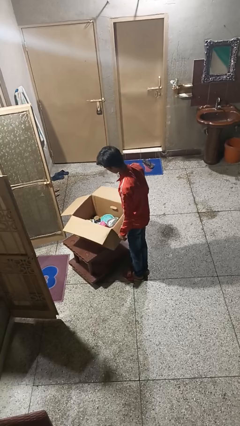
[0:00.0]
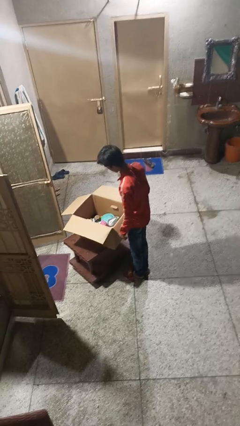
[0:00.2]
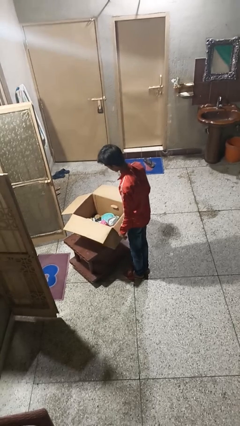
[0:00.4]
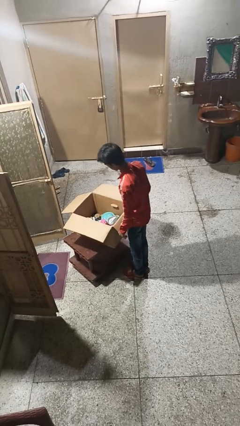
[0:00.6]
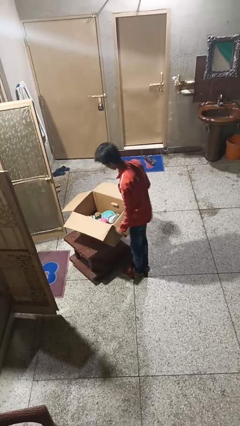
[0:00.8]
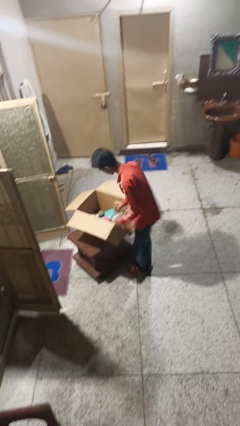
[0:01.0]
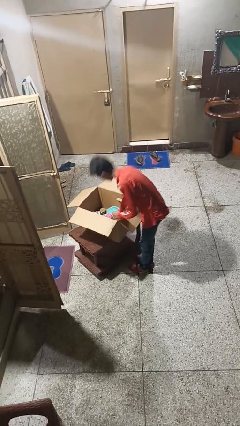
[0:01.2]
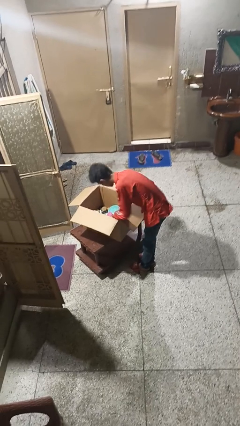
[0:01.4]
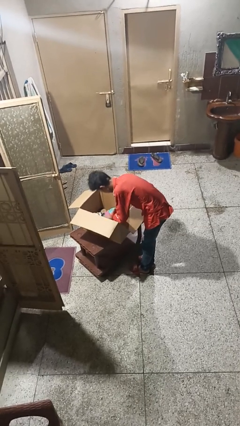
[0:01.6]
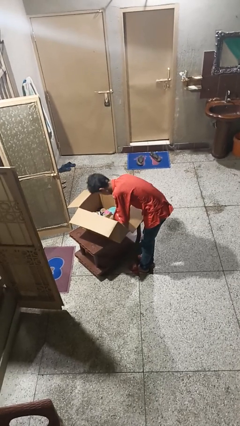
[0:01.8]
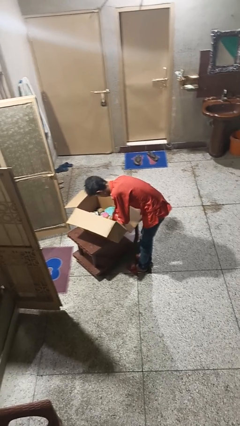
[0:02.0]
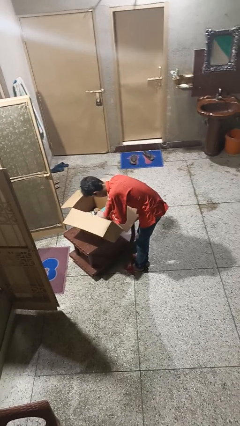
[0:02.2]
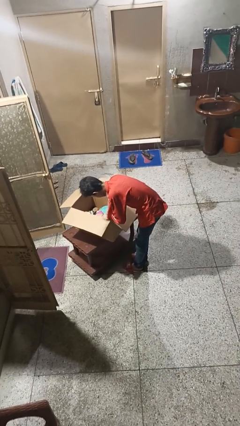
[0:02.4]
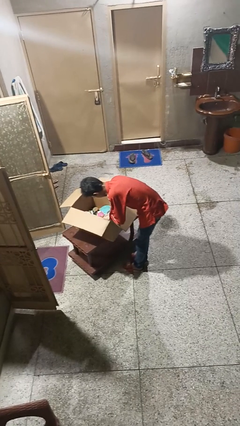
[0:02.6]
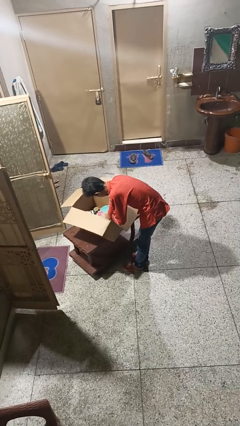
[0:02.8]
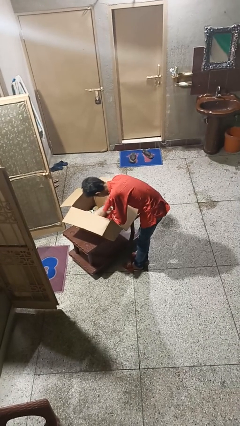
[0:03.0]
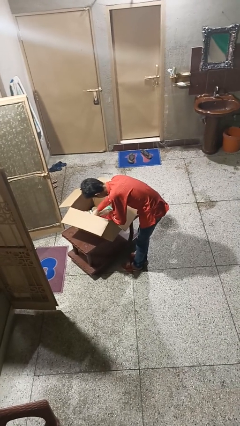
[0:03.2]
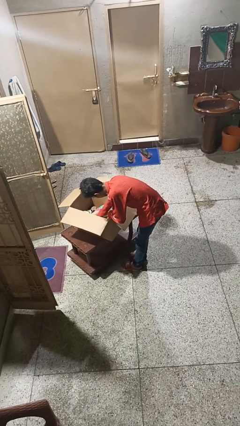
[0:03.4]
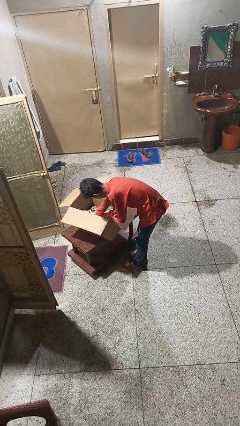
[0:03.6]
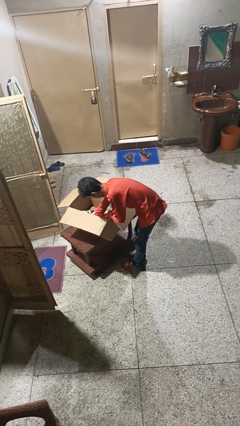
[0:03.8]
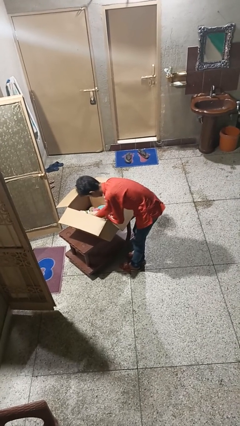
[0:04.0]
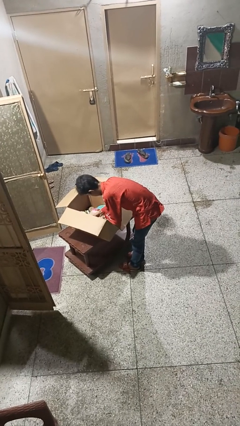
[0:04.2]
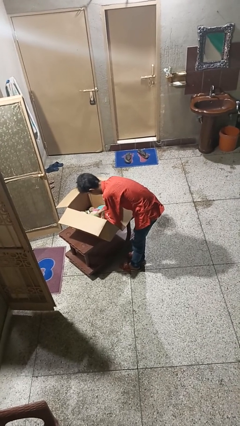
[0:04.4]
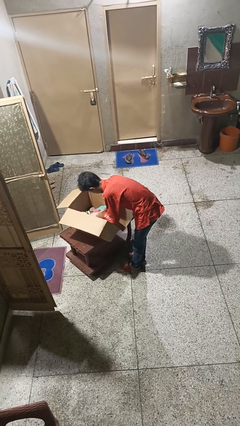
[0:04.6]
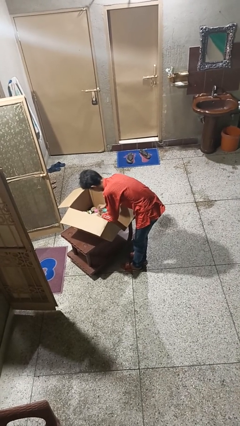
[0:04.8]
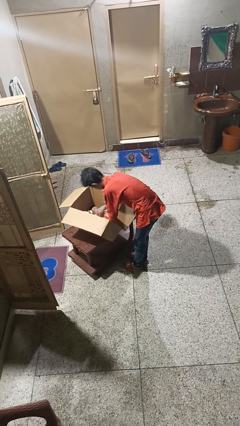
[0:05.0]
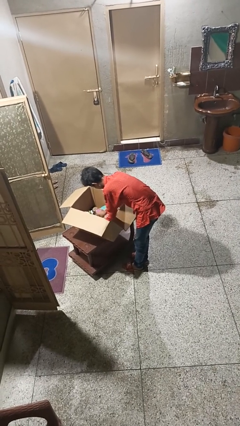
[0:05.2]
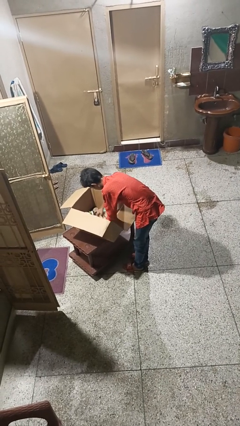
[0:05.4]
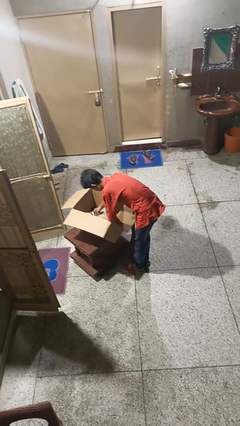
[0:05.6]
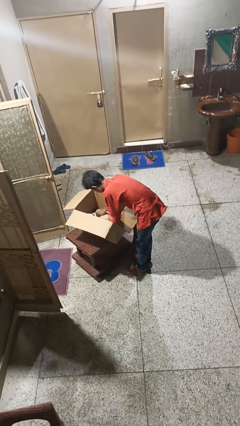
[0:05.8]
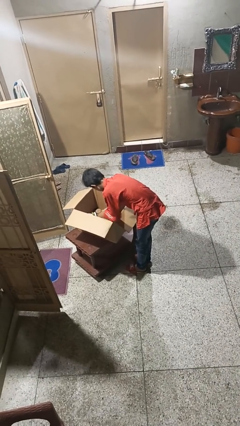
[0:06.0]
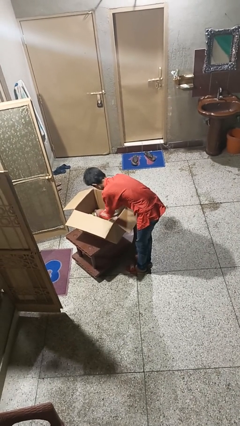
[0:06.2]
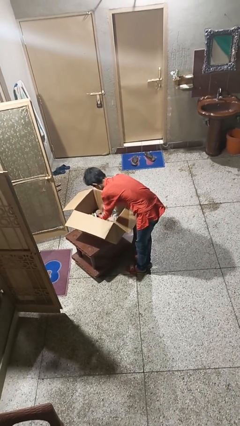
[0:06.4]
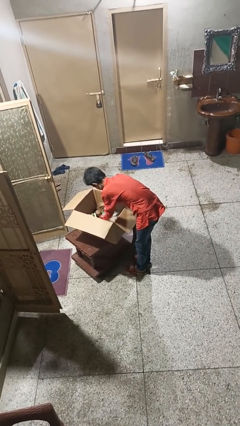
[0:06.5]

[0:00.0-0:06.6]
person searches in box

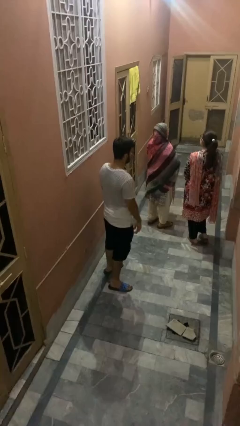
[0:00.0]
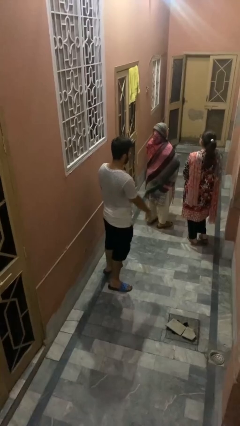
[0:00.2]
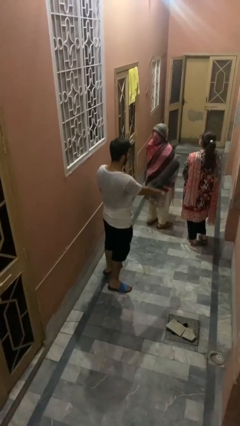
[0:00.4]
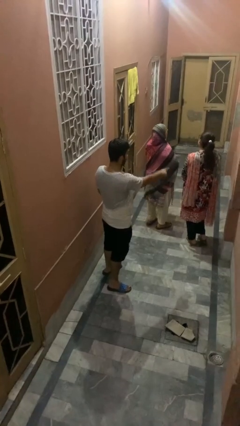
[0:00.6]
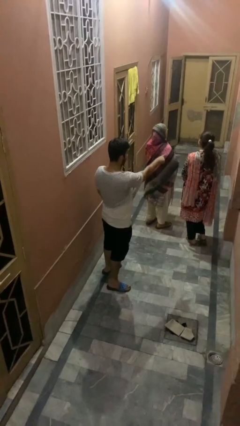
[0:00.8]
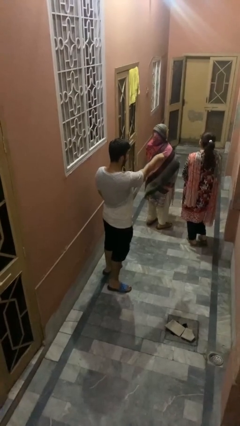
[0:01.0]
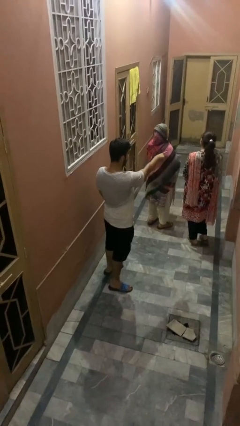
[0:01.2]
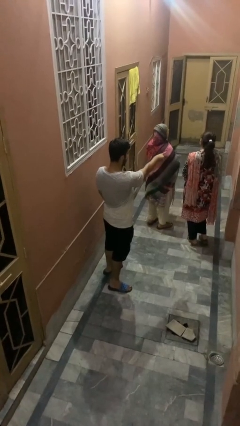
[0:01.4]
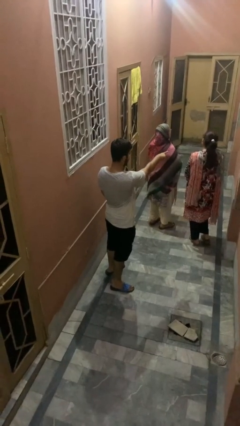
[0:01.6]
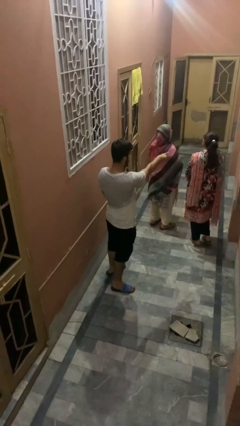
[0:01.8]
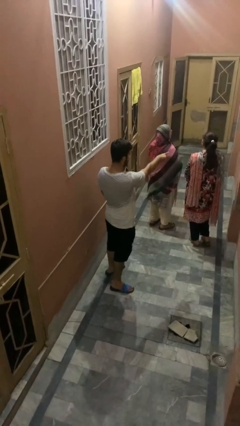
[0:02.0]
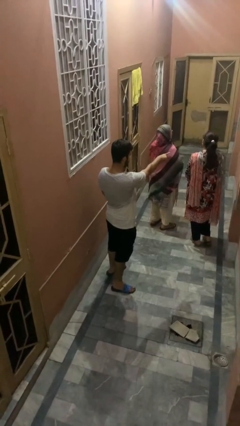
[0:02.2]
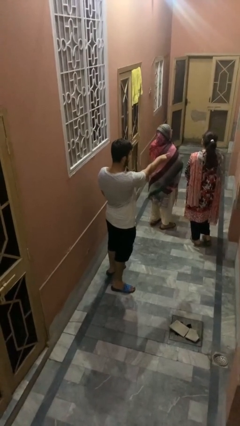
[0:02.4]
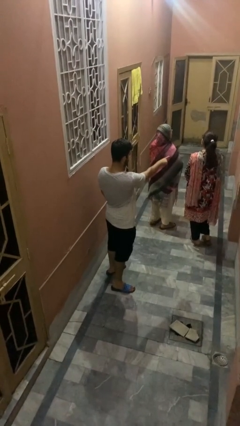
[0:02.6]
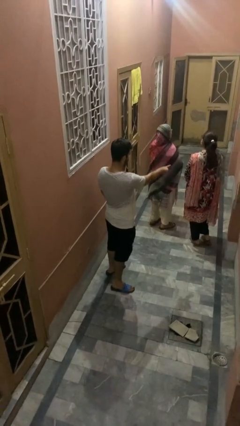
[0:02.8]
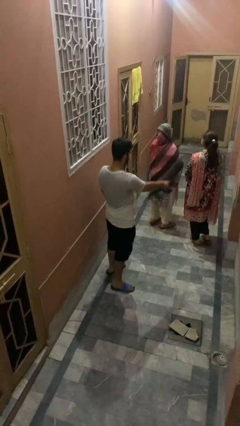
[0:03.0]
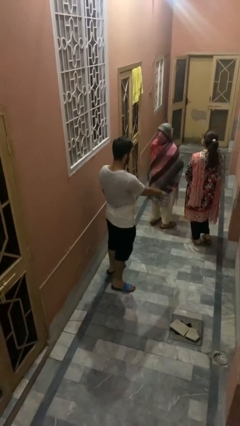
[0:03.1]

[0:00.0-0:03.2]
person points at person

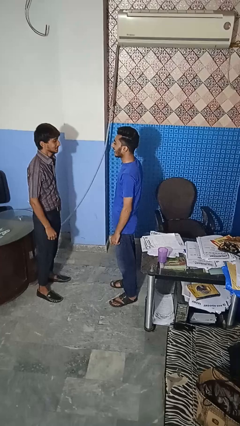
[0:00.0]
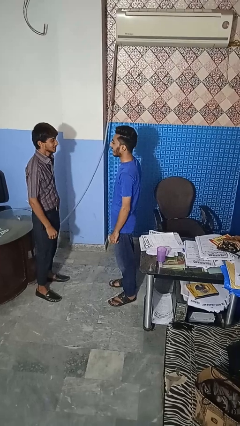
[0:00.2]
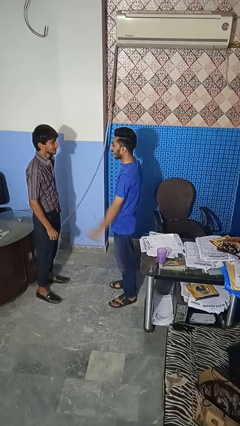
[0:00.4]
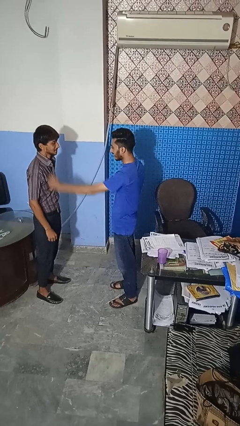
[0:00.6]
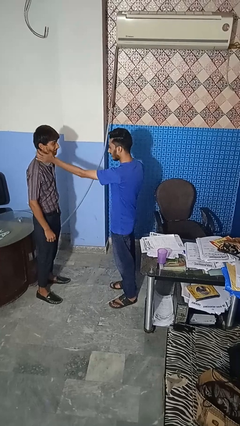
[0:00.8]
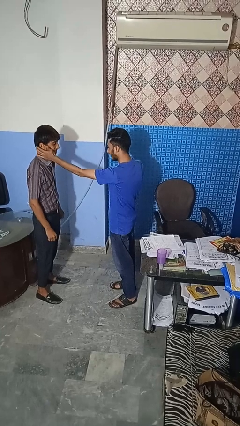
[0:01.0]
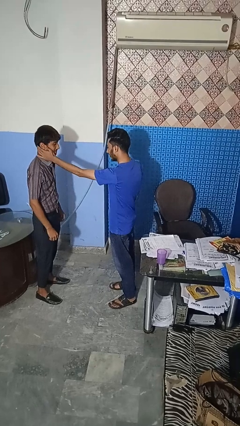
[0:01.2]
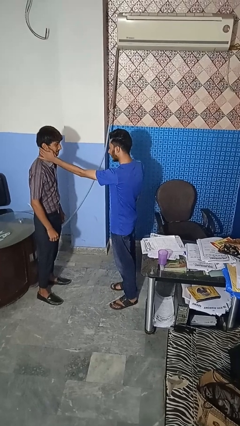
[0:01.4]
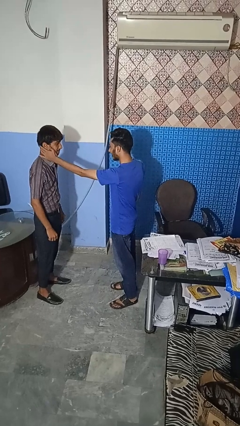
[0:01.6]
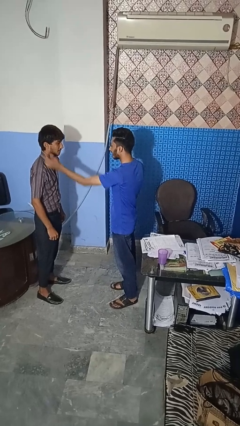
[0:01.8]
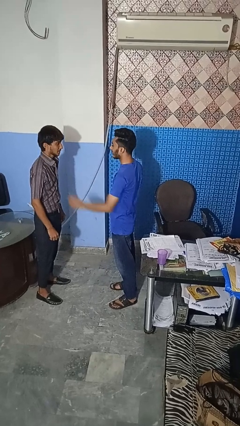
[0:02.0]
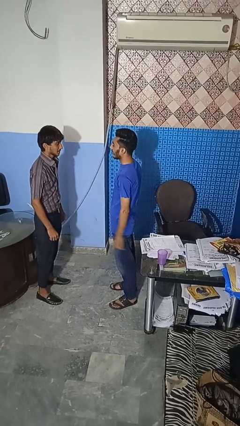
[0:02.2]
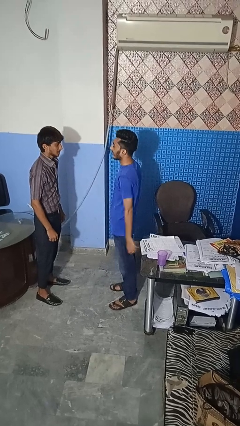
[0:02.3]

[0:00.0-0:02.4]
person touches face of person

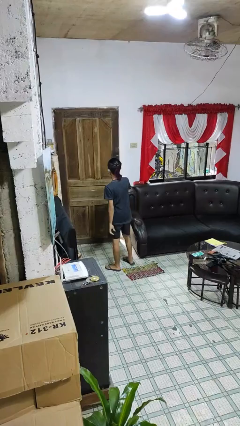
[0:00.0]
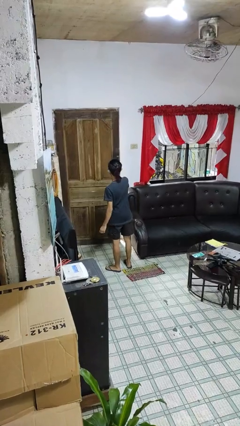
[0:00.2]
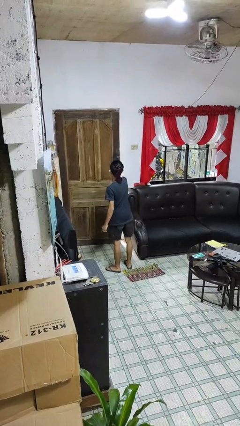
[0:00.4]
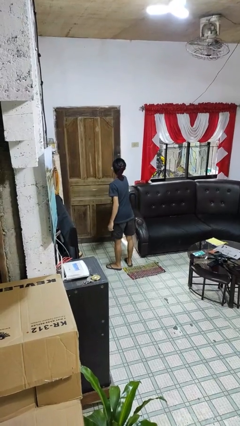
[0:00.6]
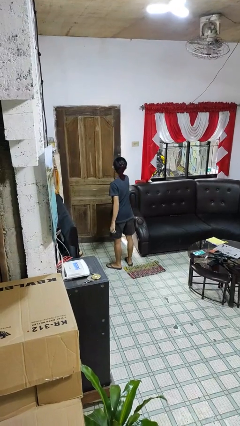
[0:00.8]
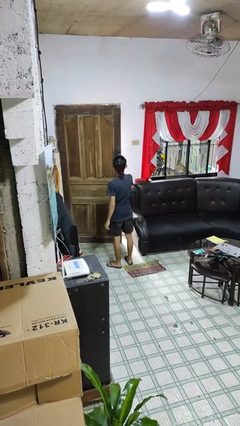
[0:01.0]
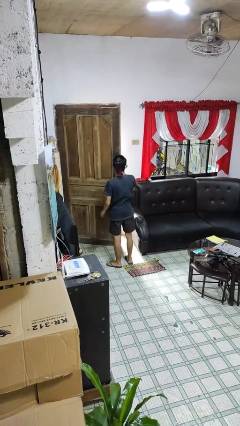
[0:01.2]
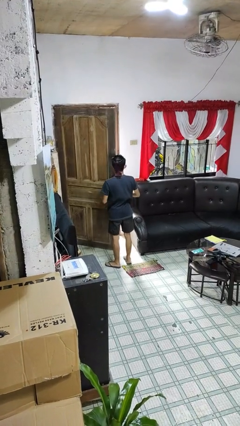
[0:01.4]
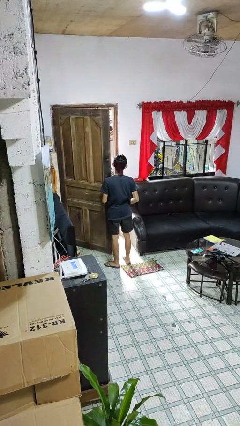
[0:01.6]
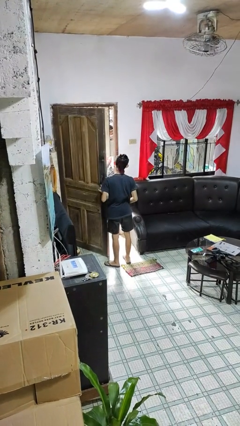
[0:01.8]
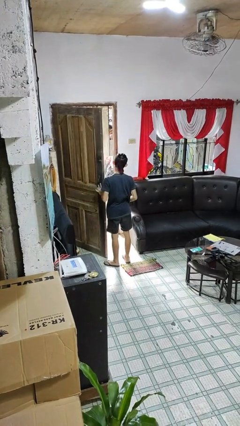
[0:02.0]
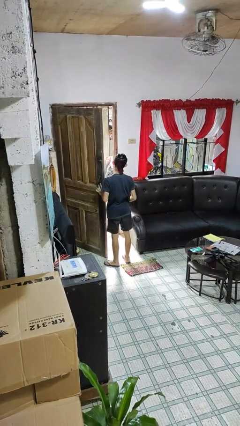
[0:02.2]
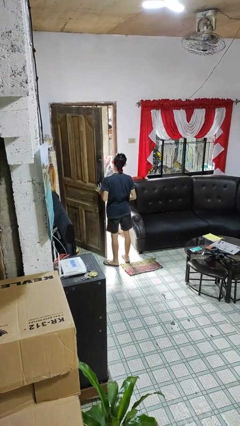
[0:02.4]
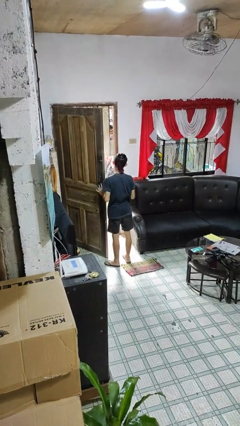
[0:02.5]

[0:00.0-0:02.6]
person opens facility door

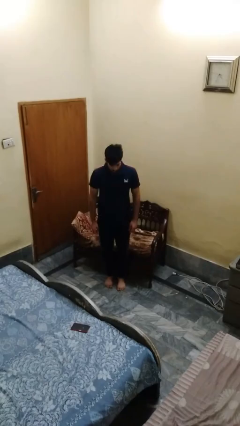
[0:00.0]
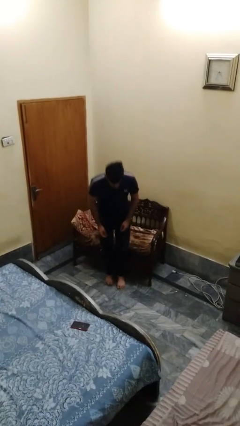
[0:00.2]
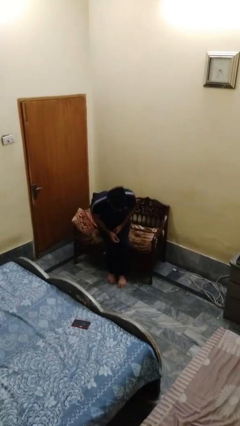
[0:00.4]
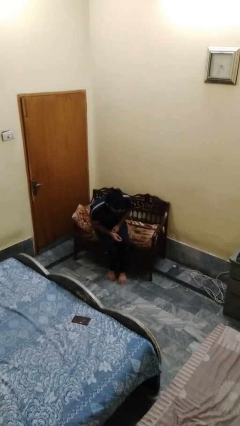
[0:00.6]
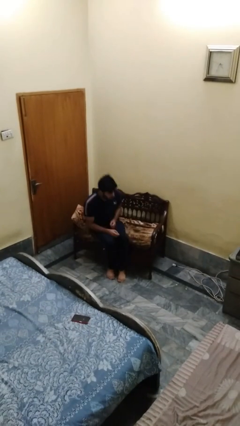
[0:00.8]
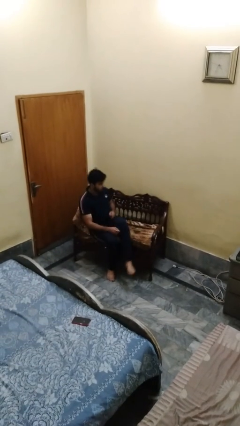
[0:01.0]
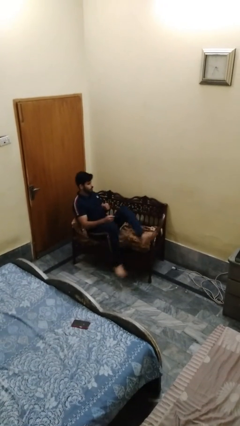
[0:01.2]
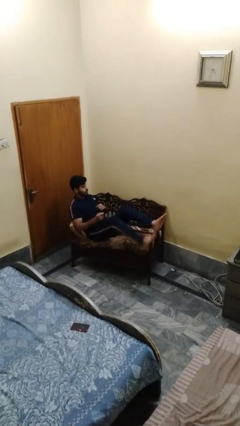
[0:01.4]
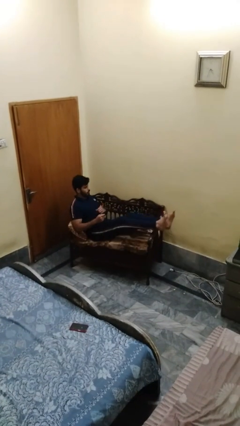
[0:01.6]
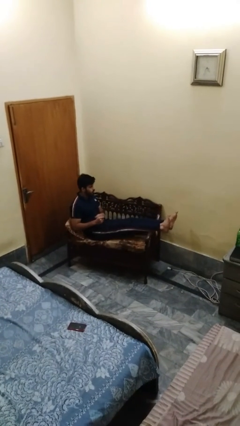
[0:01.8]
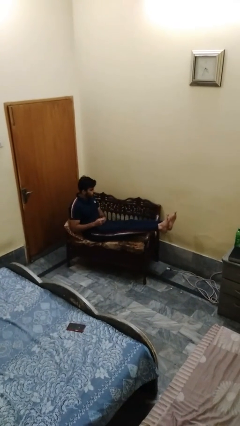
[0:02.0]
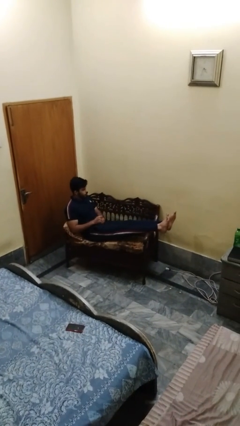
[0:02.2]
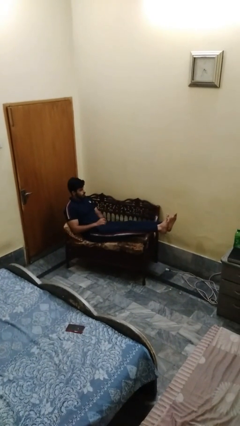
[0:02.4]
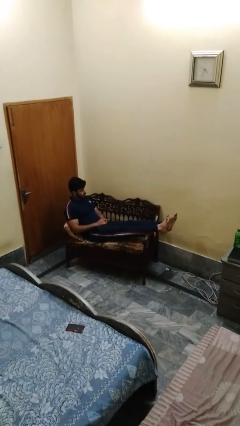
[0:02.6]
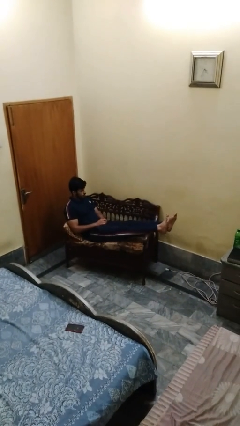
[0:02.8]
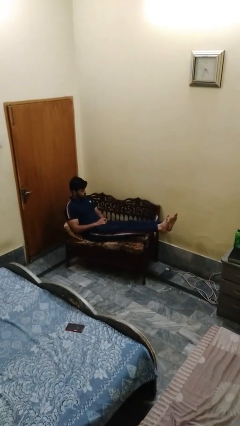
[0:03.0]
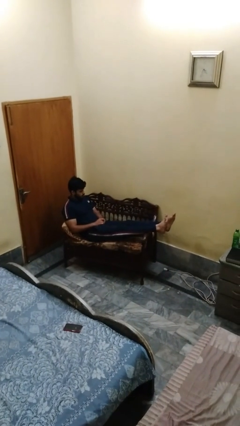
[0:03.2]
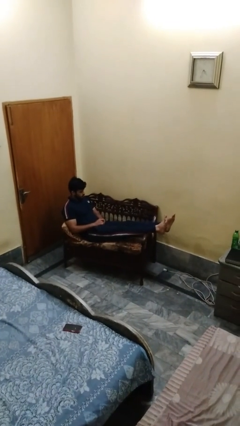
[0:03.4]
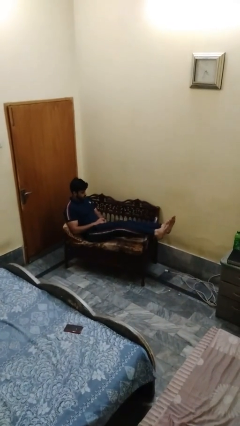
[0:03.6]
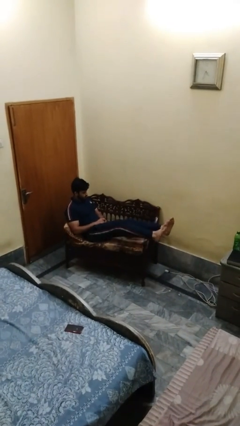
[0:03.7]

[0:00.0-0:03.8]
person lies down on couch
